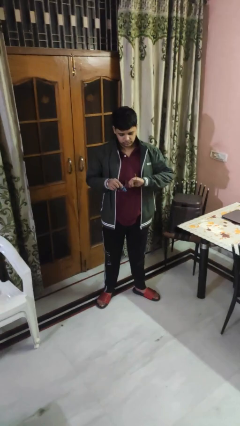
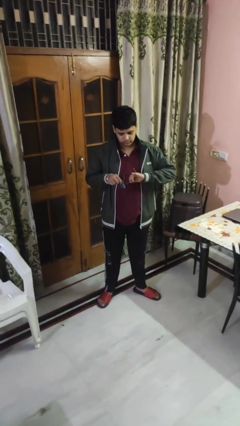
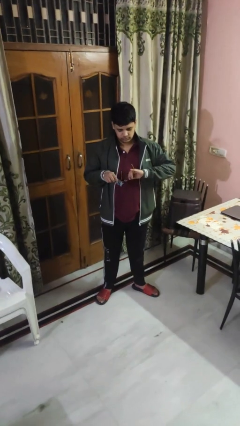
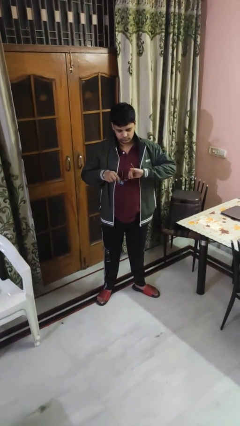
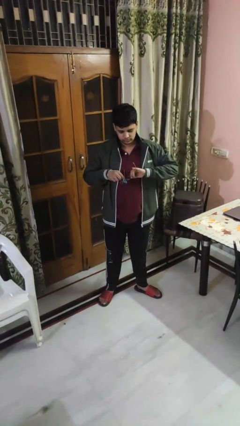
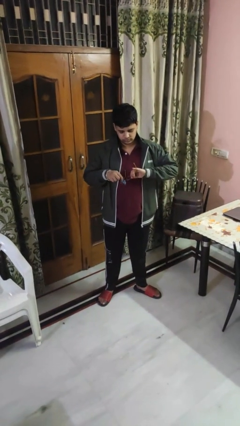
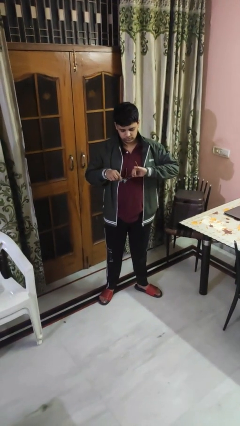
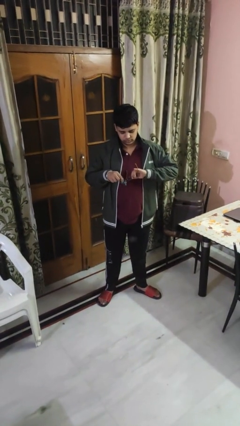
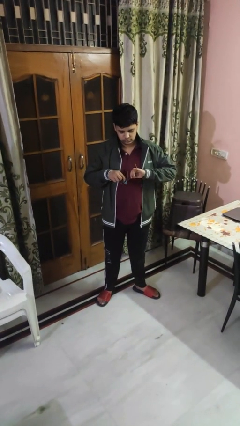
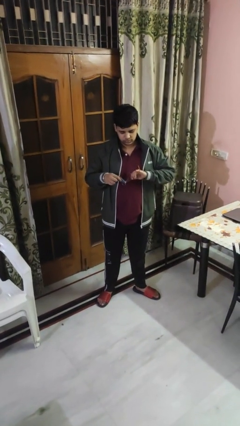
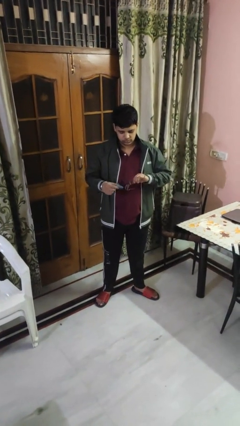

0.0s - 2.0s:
person cleans eyeglasses

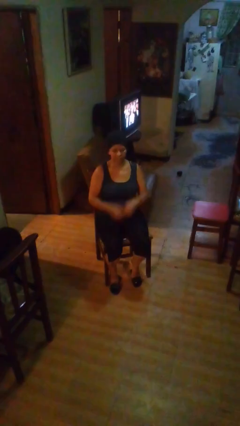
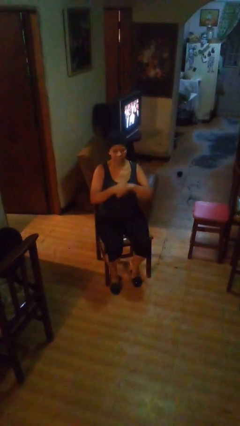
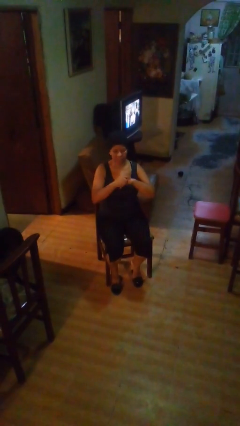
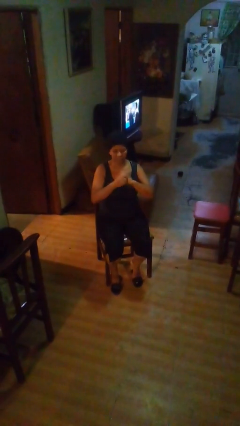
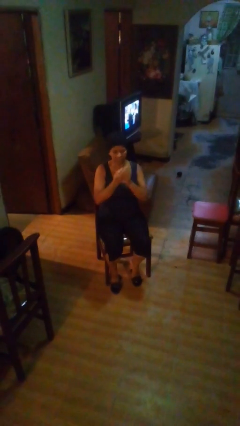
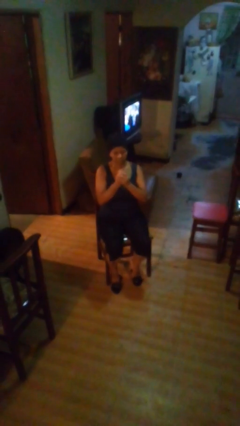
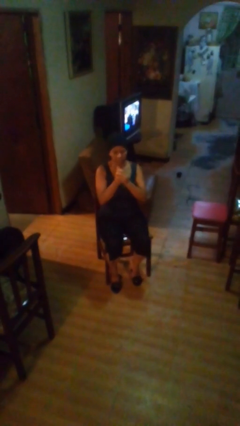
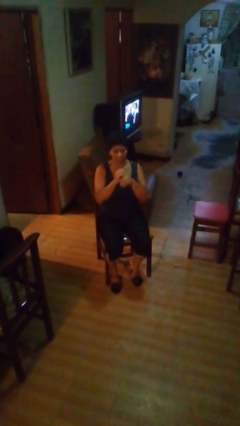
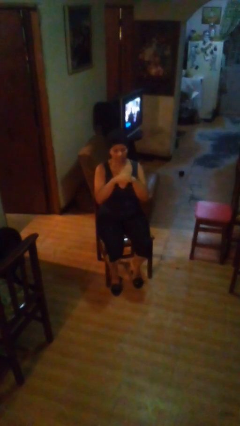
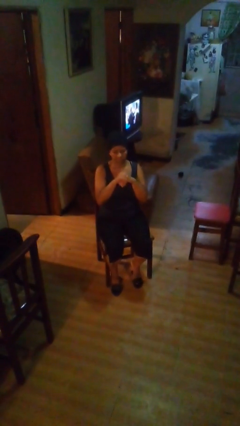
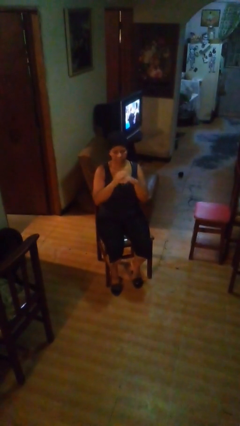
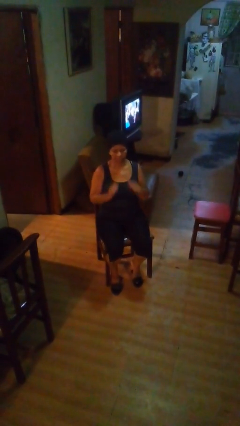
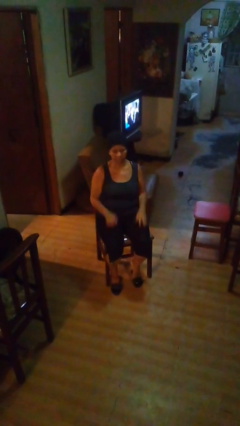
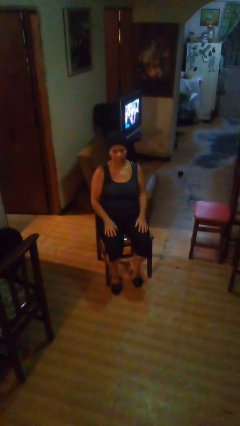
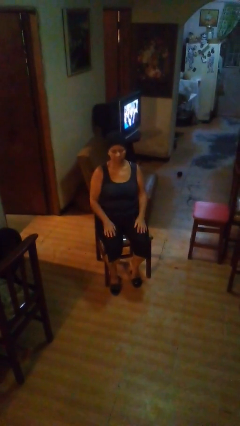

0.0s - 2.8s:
person cracks knuckles

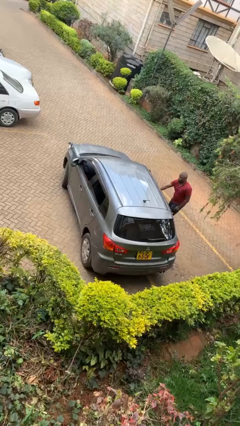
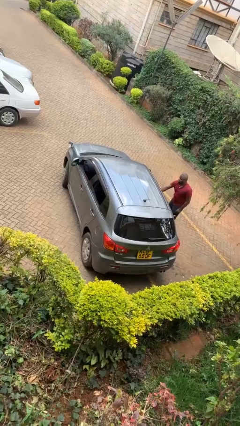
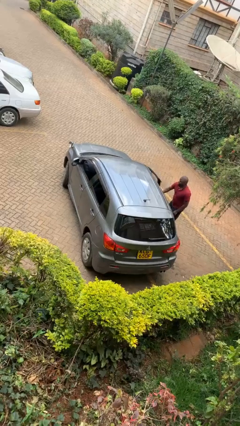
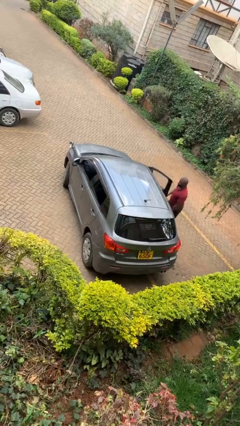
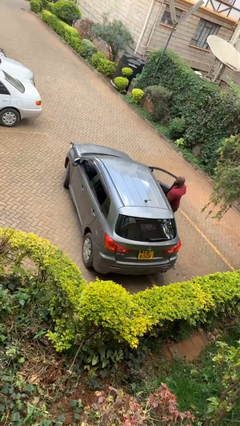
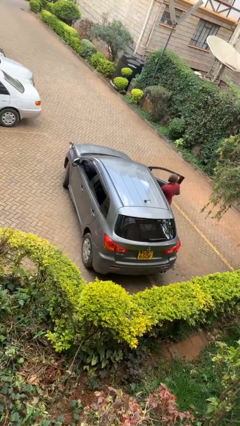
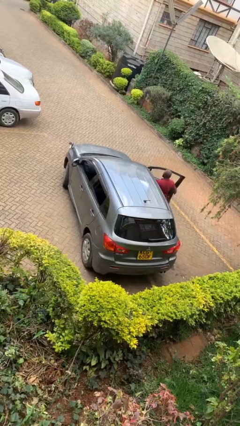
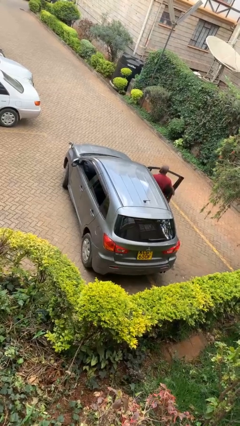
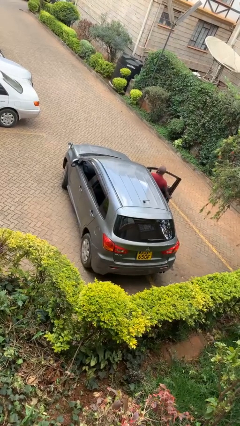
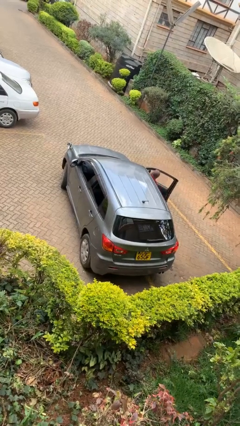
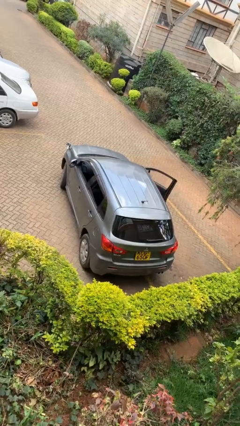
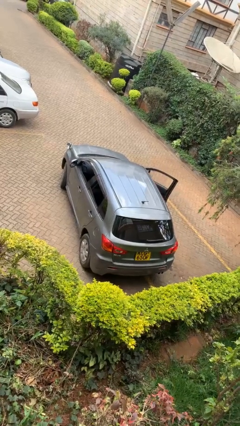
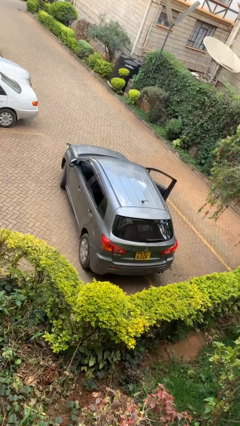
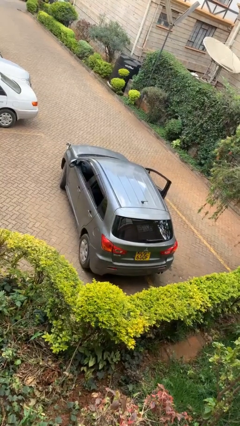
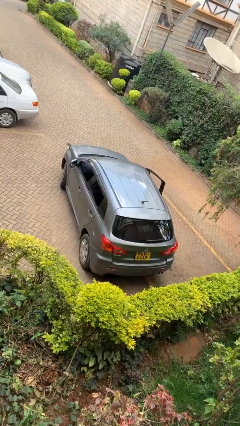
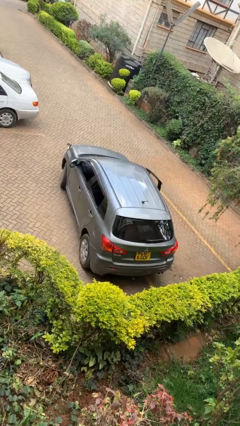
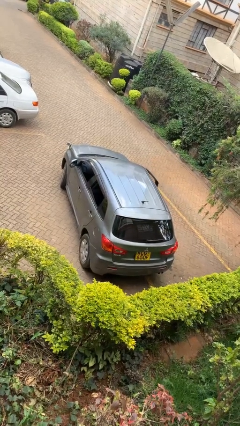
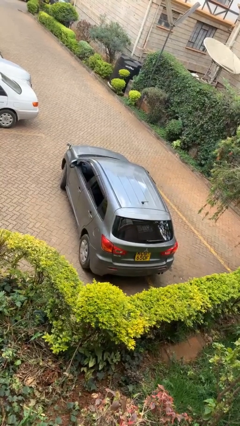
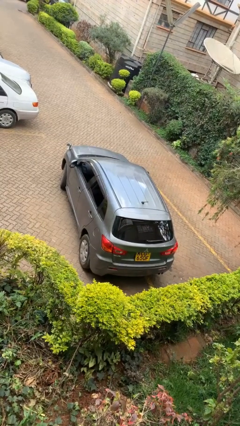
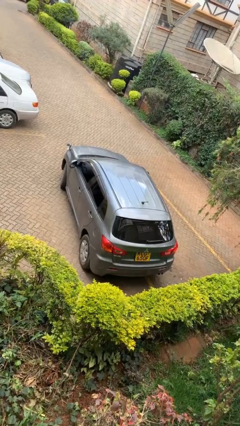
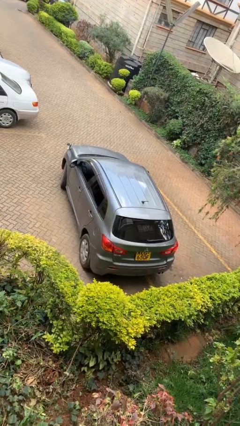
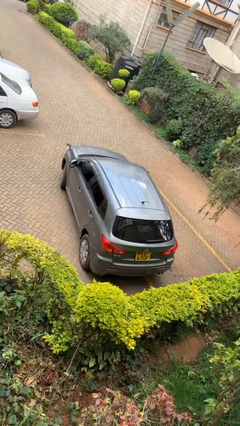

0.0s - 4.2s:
car picks up person

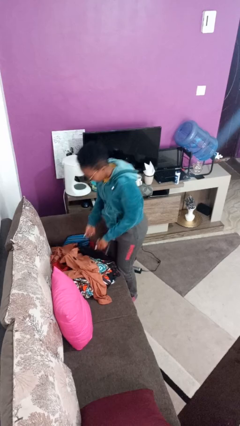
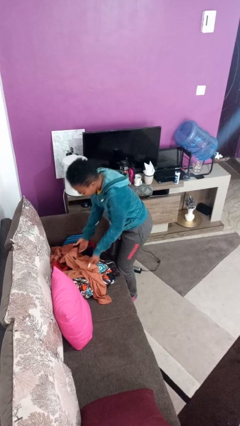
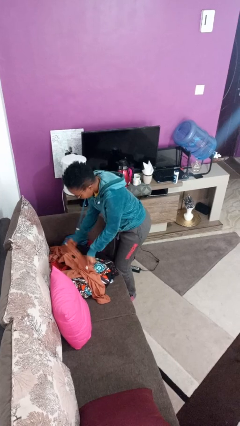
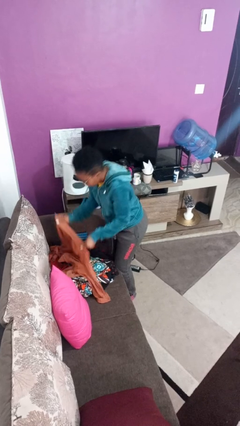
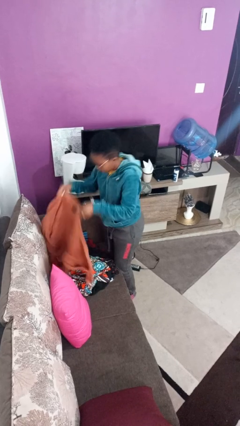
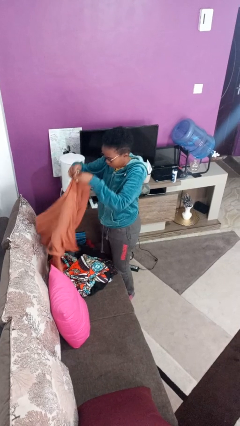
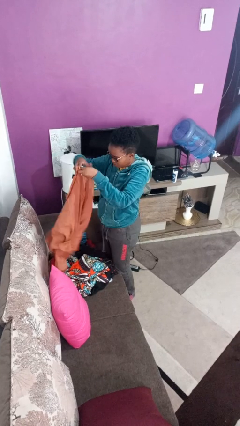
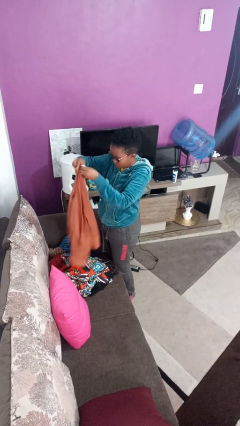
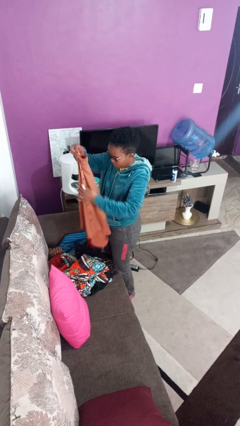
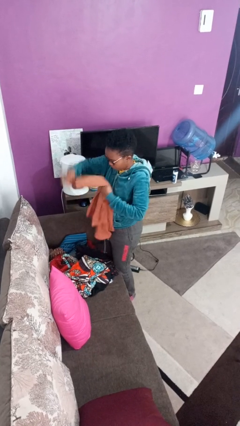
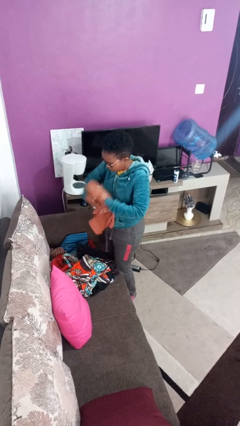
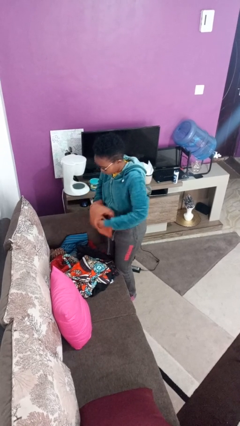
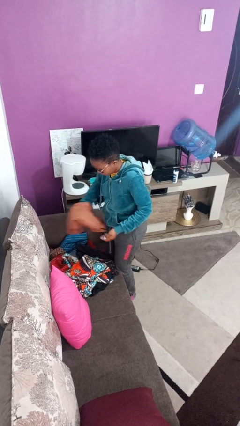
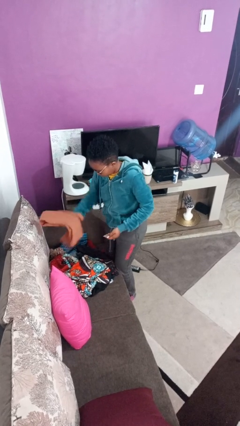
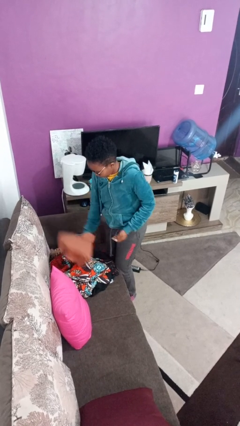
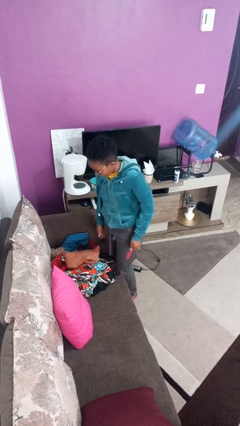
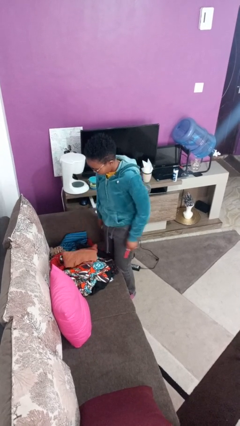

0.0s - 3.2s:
person folds shirt

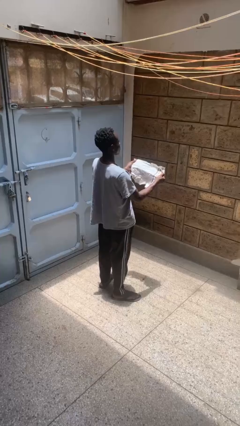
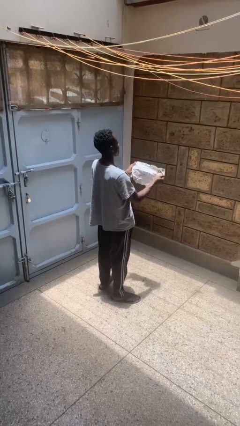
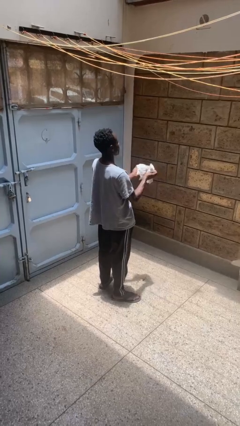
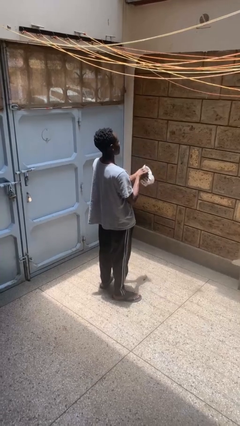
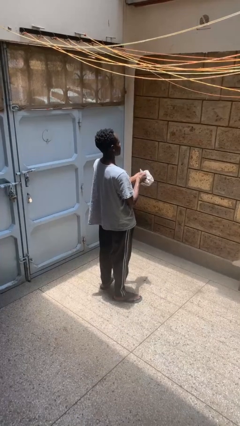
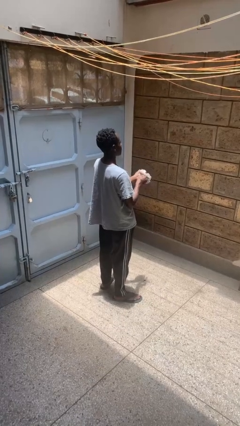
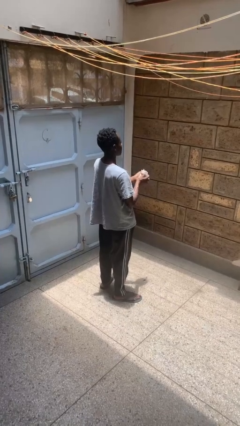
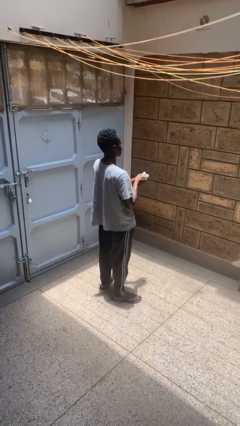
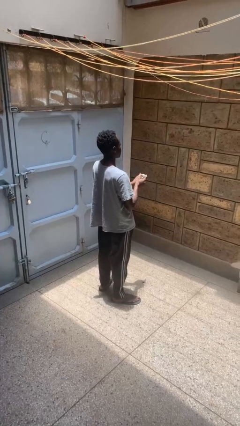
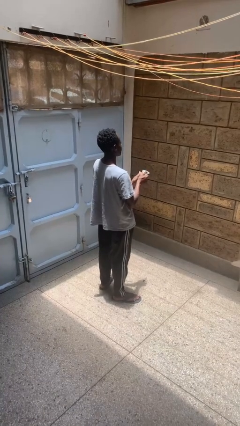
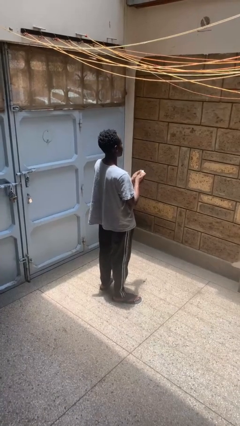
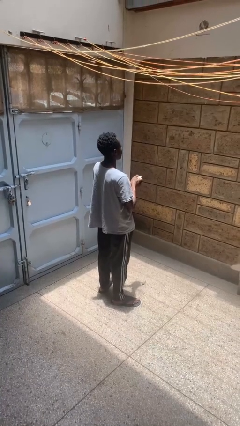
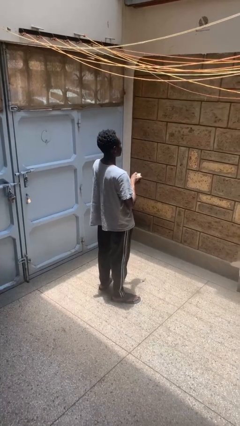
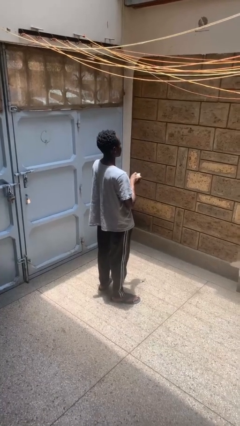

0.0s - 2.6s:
person crumples paper

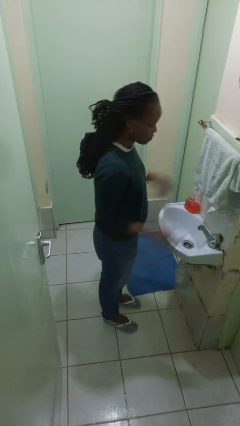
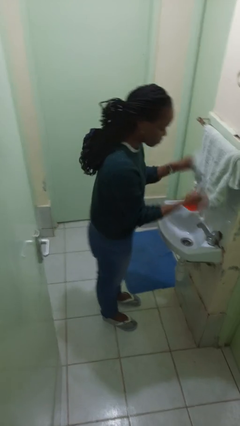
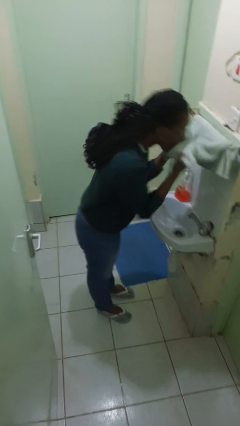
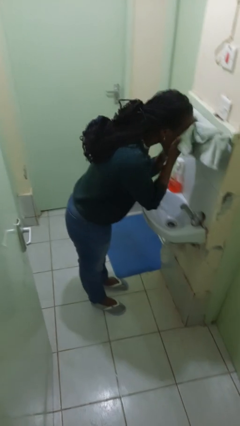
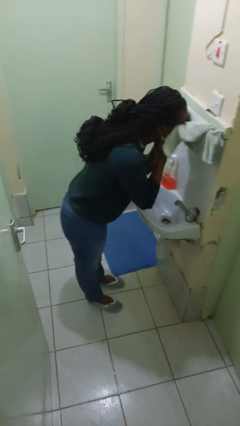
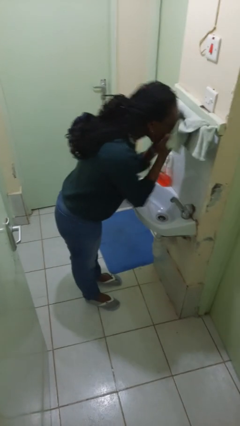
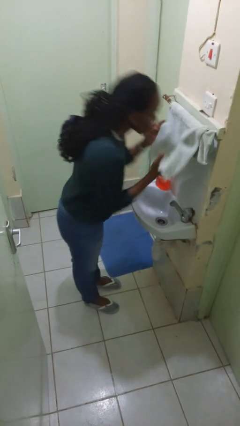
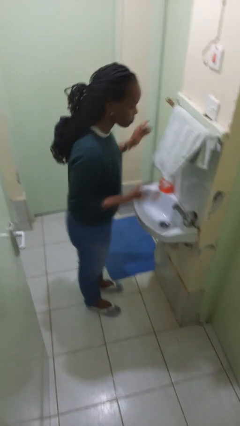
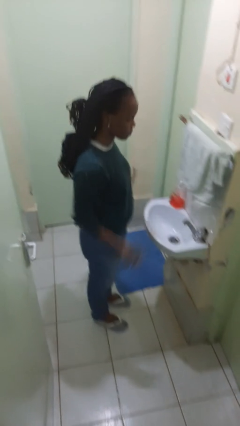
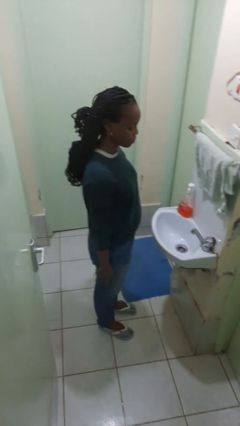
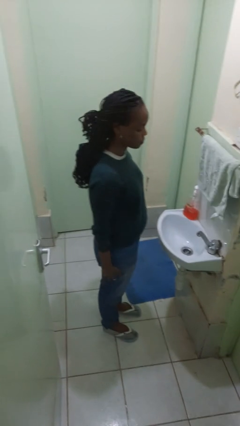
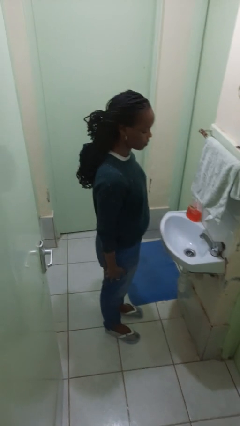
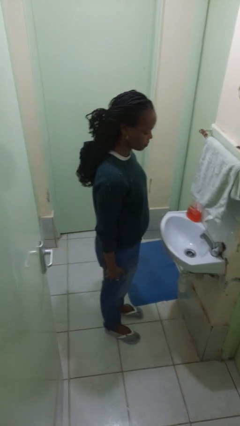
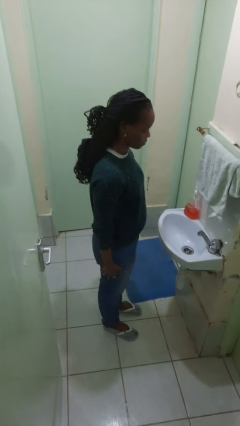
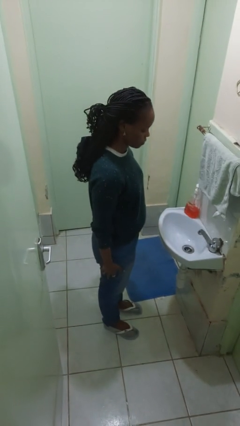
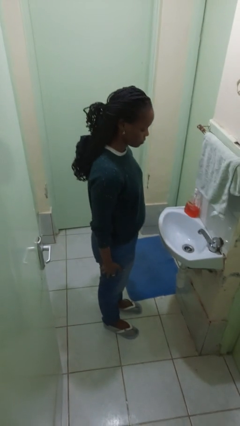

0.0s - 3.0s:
person dries face with towel
